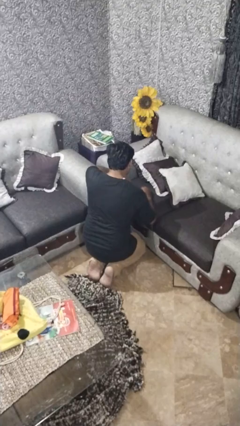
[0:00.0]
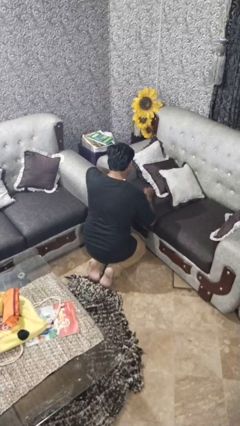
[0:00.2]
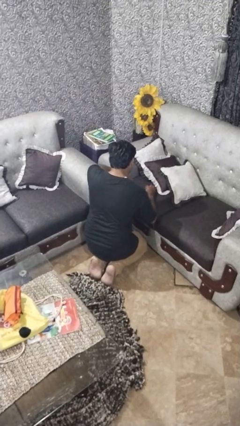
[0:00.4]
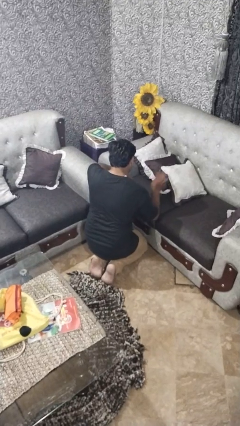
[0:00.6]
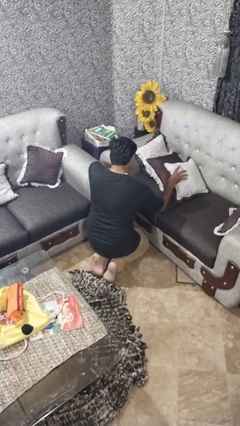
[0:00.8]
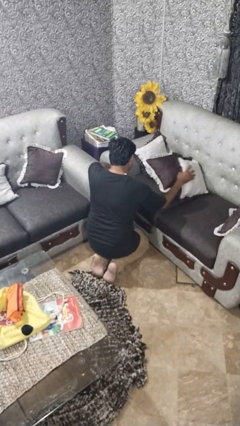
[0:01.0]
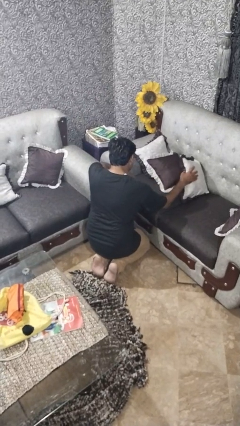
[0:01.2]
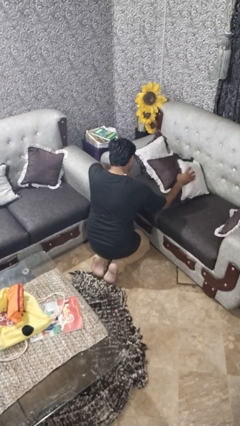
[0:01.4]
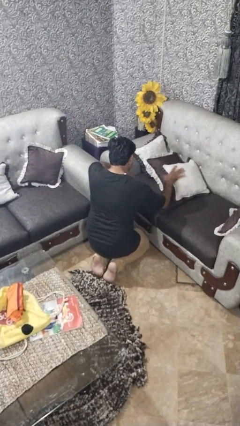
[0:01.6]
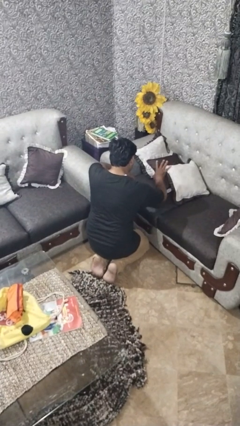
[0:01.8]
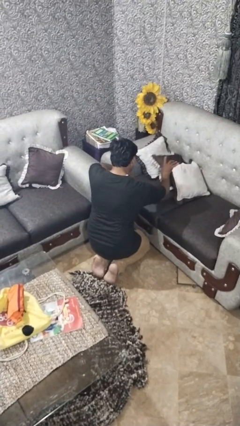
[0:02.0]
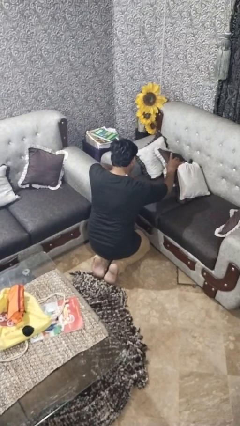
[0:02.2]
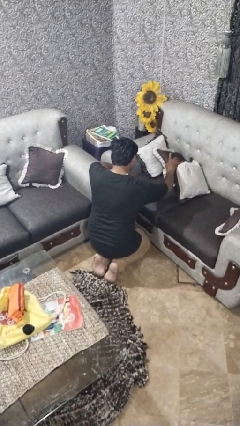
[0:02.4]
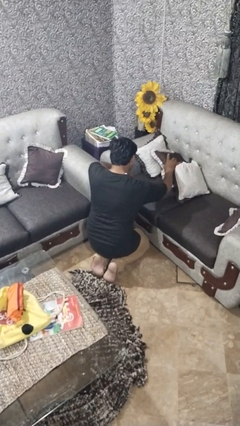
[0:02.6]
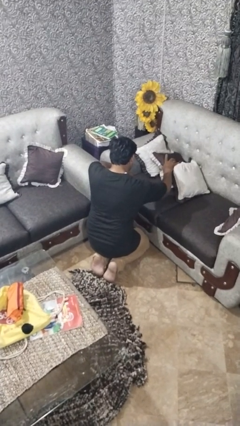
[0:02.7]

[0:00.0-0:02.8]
person searches in couch

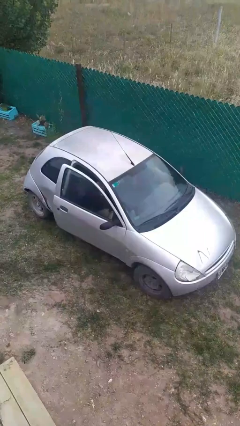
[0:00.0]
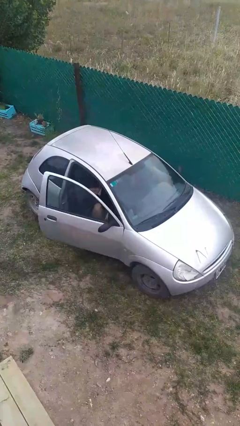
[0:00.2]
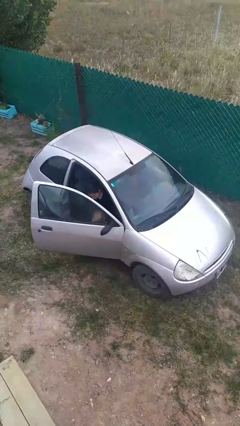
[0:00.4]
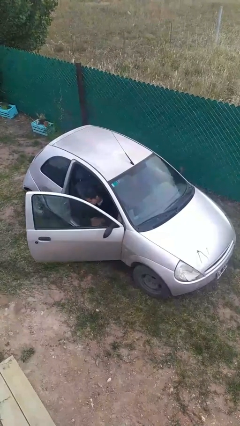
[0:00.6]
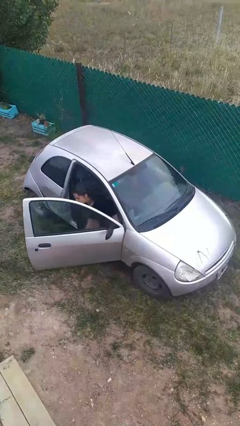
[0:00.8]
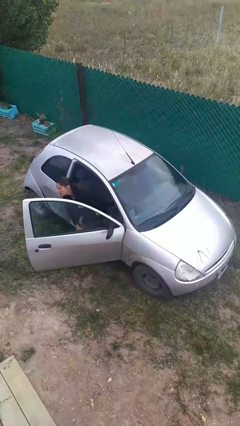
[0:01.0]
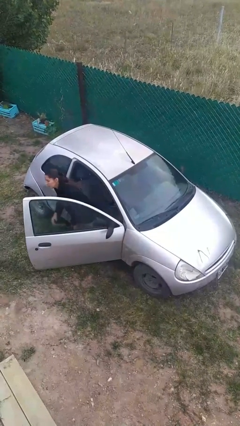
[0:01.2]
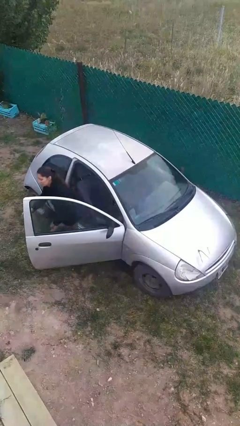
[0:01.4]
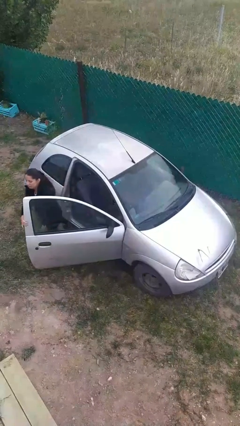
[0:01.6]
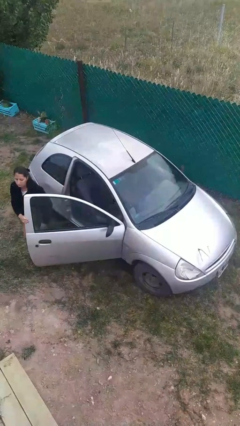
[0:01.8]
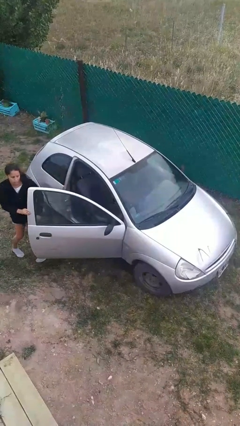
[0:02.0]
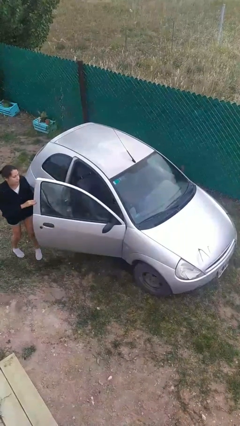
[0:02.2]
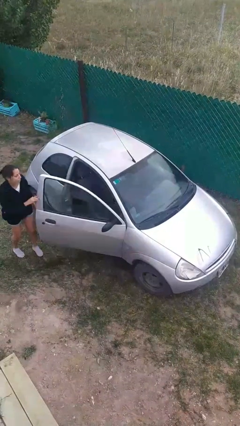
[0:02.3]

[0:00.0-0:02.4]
car drops off person

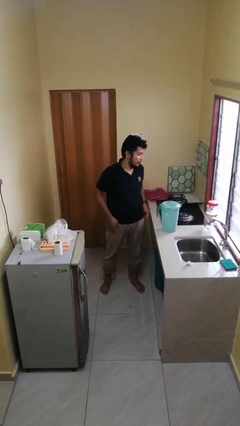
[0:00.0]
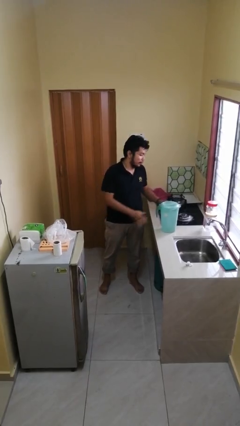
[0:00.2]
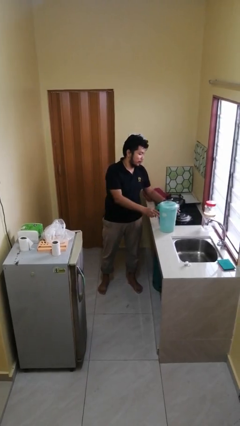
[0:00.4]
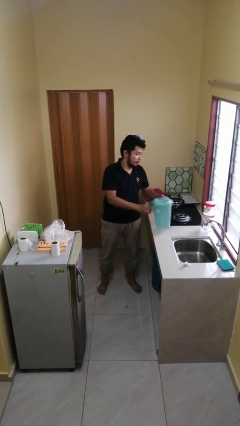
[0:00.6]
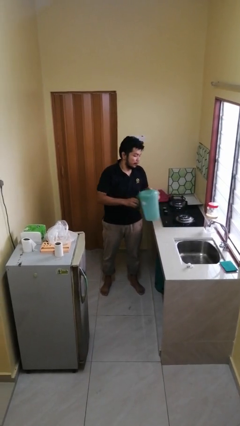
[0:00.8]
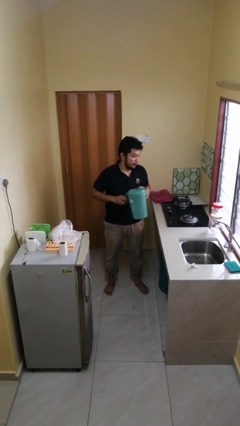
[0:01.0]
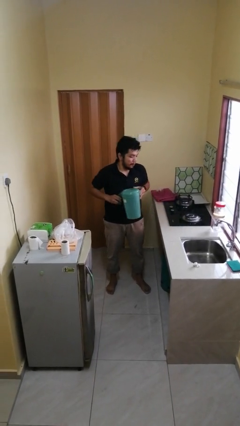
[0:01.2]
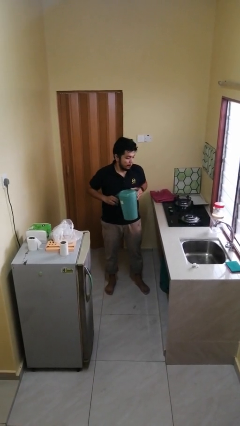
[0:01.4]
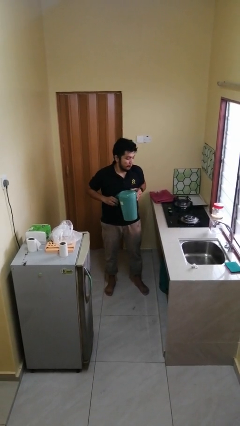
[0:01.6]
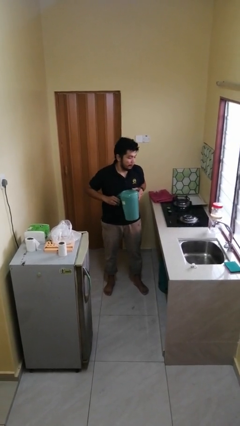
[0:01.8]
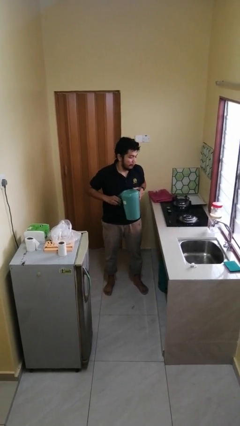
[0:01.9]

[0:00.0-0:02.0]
person picks up object from countertop

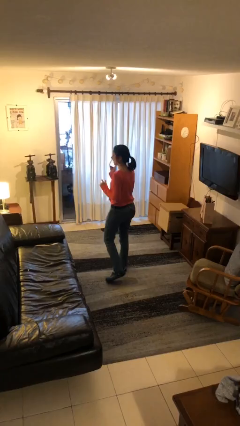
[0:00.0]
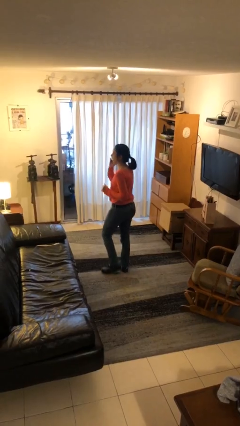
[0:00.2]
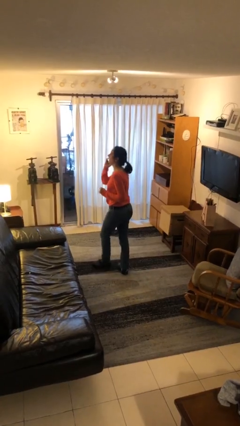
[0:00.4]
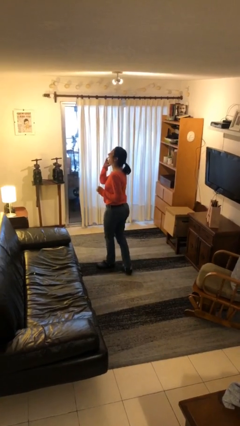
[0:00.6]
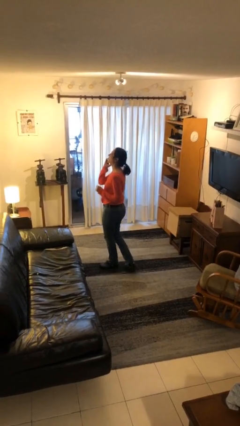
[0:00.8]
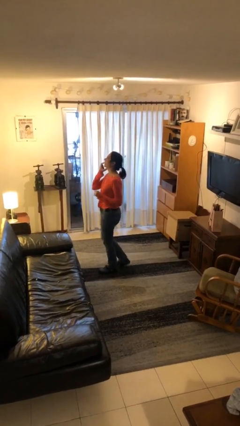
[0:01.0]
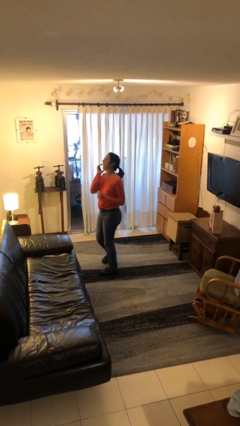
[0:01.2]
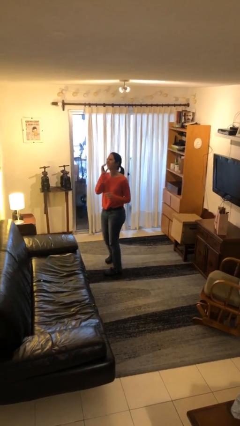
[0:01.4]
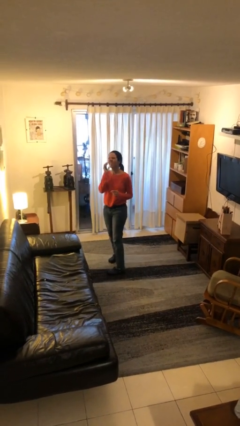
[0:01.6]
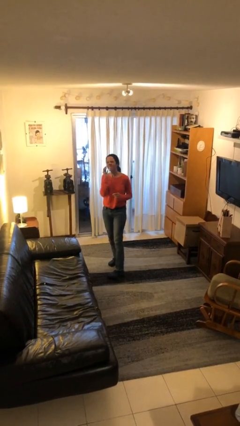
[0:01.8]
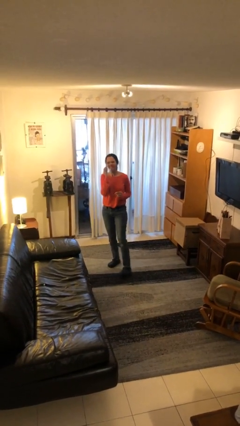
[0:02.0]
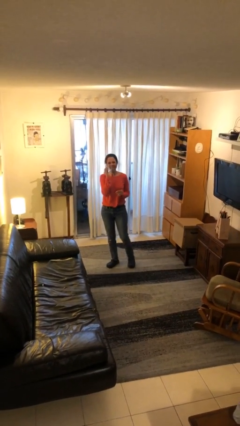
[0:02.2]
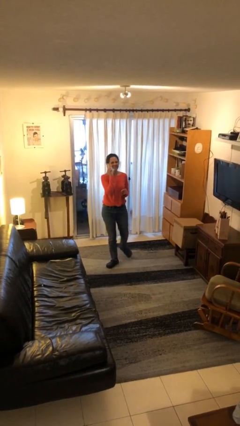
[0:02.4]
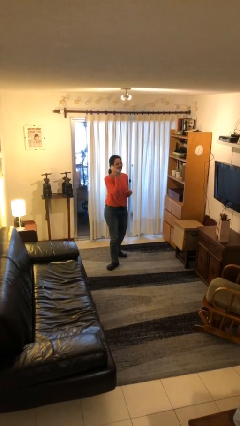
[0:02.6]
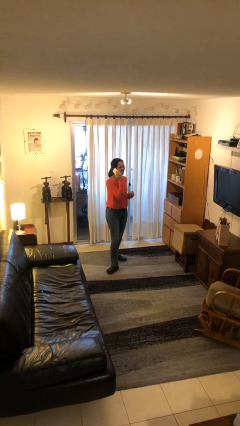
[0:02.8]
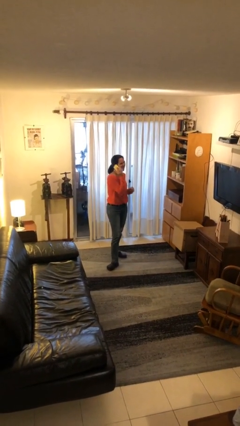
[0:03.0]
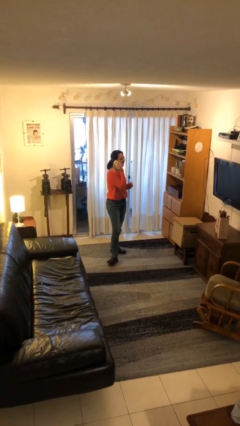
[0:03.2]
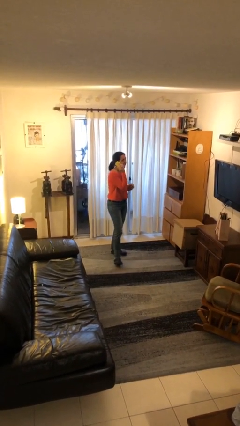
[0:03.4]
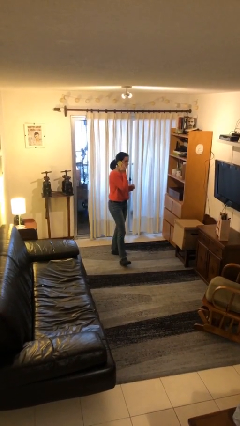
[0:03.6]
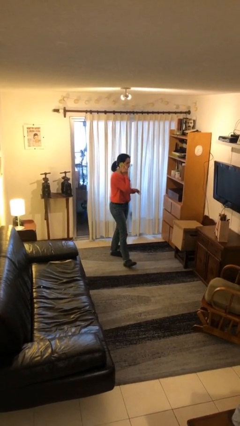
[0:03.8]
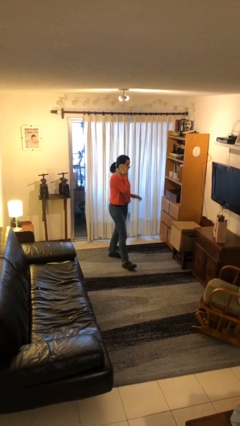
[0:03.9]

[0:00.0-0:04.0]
person talks on phone

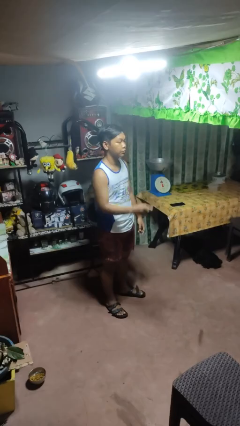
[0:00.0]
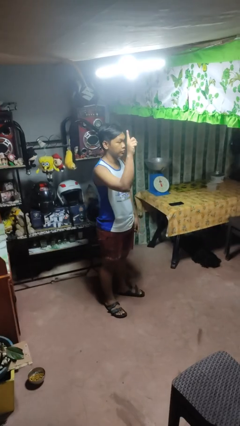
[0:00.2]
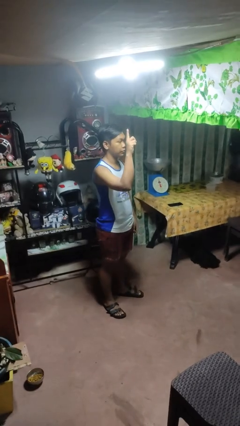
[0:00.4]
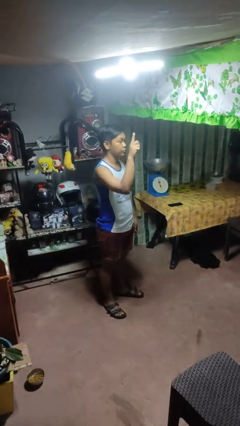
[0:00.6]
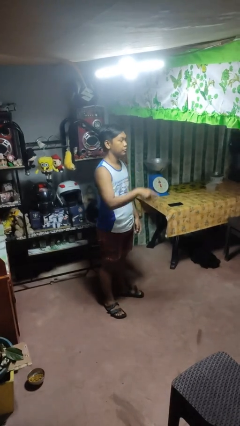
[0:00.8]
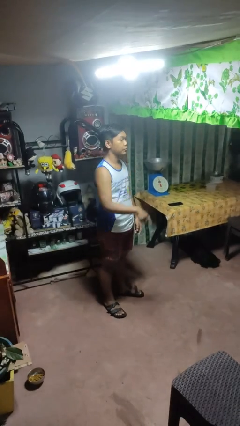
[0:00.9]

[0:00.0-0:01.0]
person gestures number one

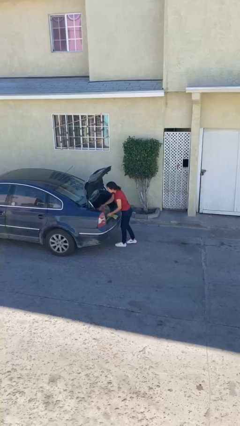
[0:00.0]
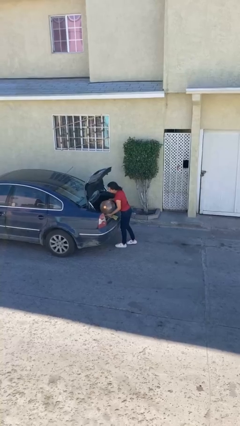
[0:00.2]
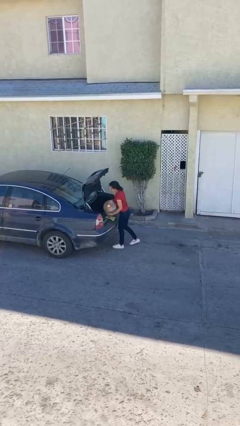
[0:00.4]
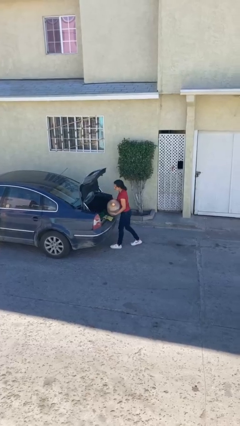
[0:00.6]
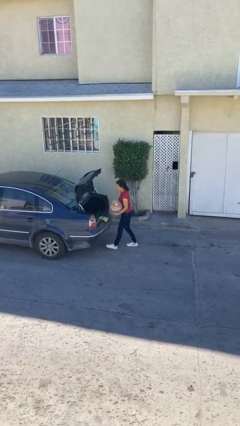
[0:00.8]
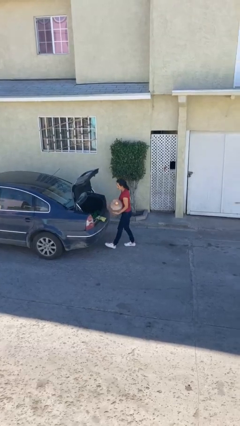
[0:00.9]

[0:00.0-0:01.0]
person unloads car

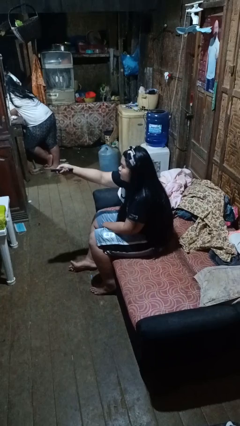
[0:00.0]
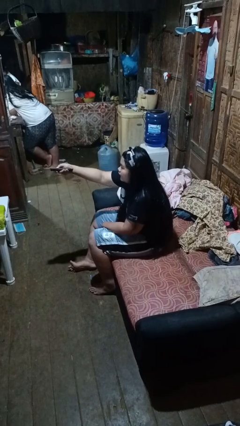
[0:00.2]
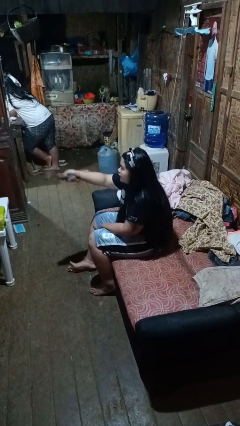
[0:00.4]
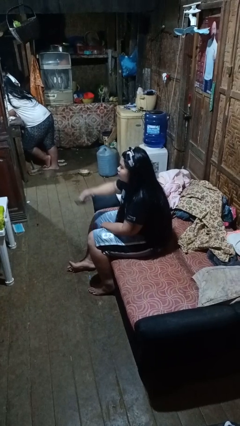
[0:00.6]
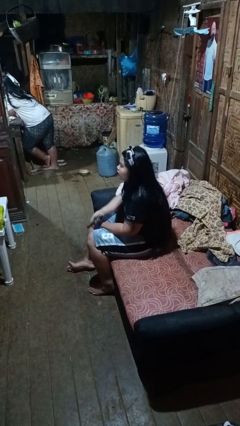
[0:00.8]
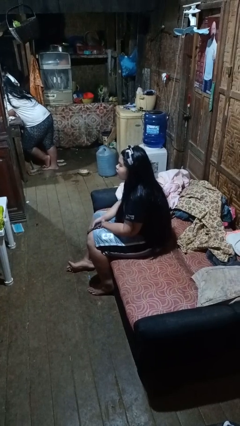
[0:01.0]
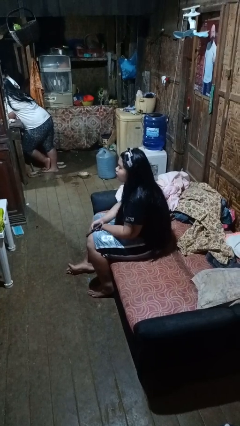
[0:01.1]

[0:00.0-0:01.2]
person uses television remote

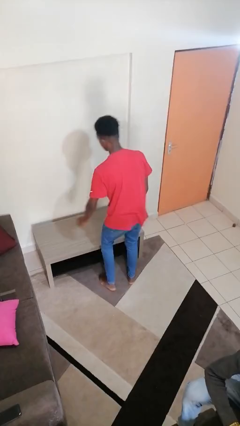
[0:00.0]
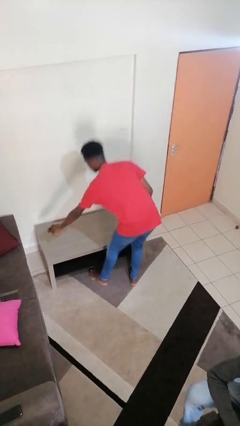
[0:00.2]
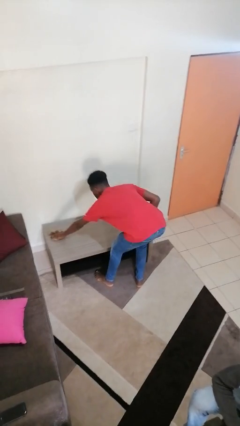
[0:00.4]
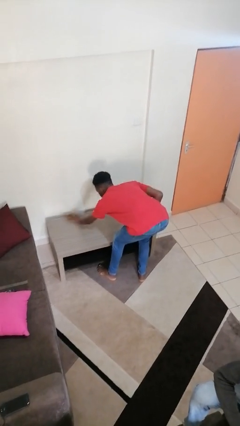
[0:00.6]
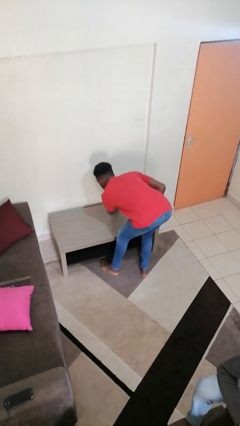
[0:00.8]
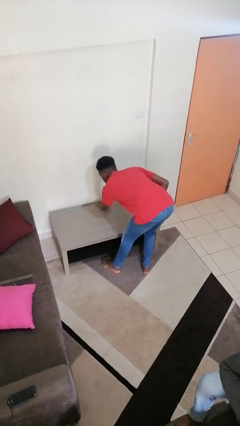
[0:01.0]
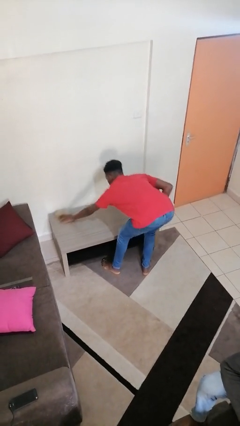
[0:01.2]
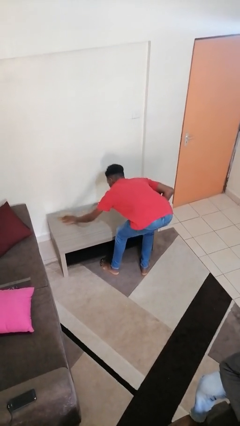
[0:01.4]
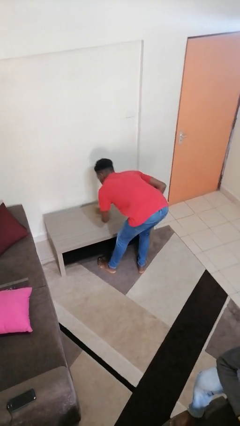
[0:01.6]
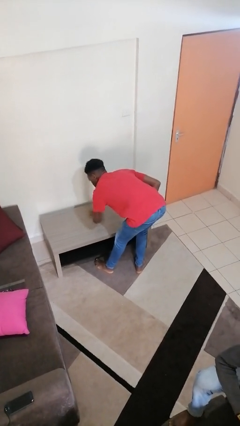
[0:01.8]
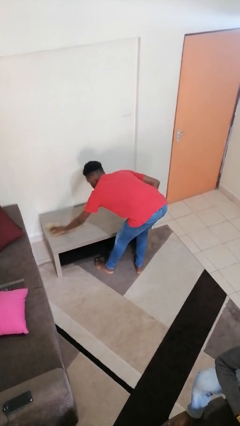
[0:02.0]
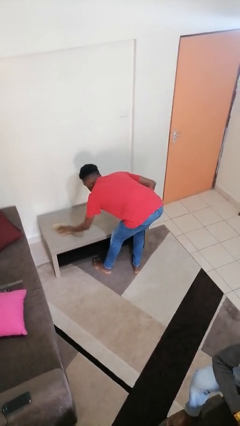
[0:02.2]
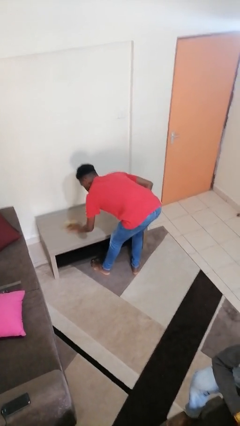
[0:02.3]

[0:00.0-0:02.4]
person cleans table with rag
